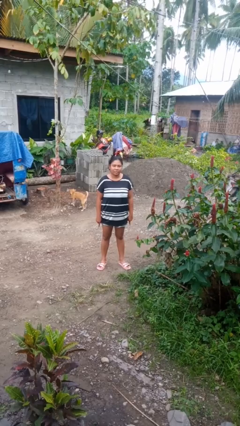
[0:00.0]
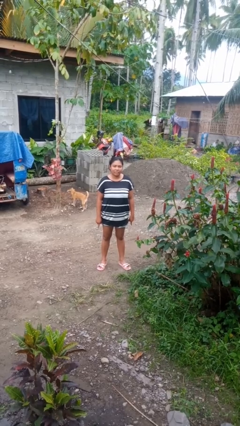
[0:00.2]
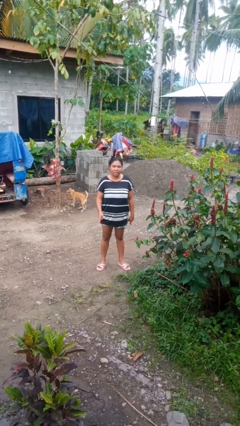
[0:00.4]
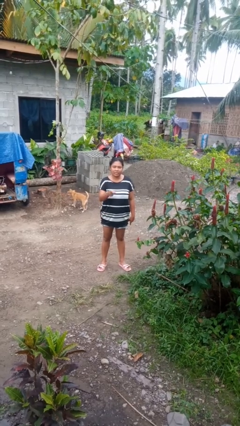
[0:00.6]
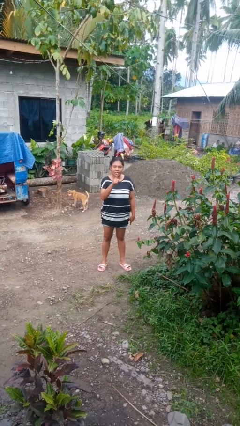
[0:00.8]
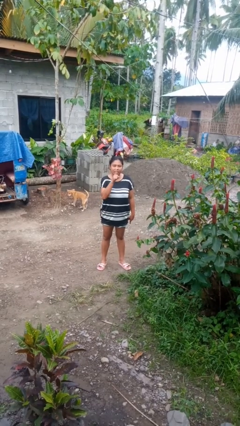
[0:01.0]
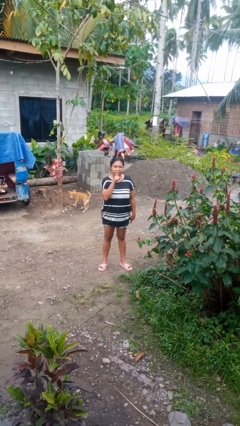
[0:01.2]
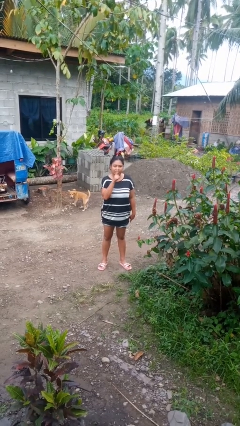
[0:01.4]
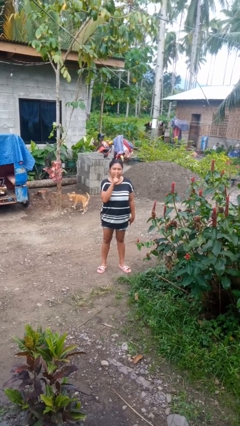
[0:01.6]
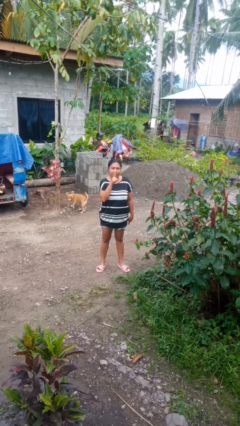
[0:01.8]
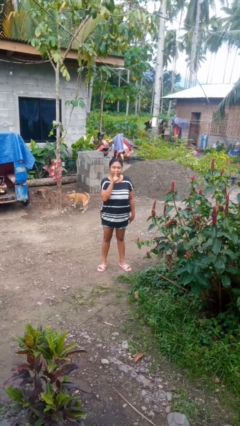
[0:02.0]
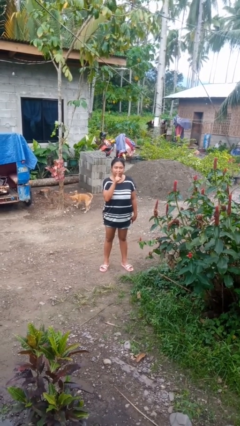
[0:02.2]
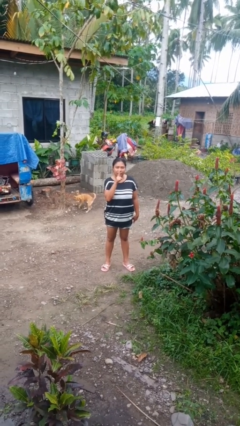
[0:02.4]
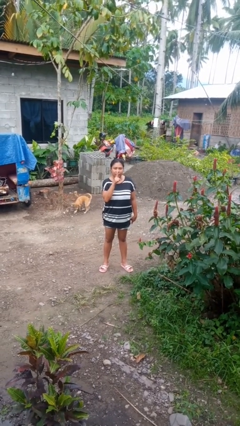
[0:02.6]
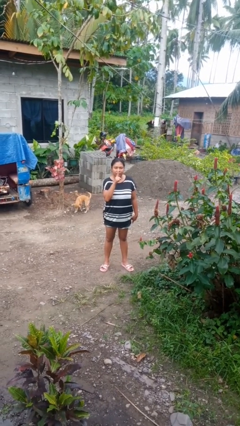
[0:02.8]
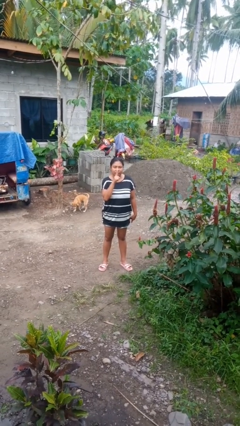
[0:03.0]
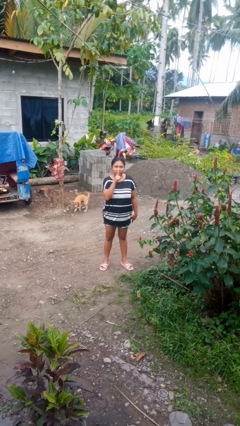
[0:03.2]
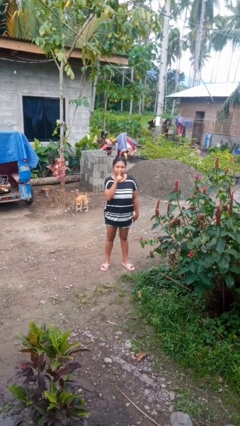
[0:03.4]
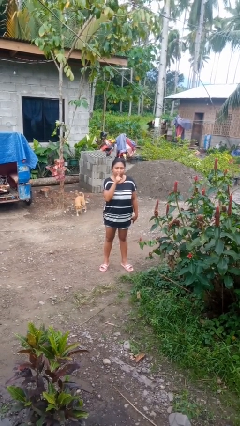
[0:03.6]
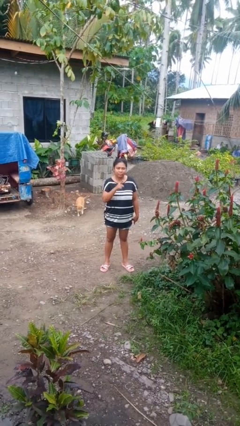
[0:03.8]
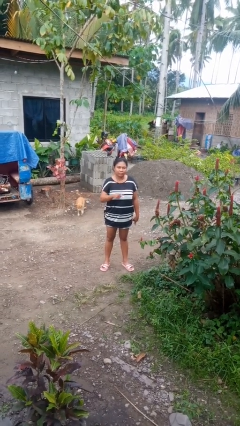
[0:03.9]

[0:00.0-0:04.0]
person gestures be quiet

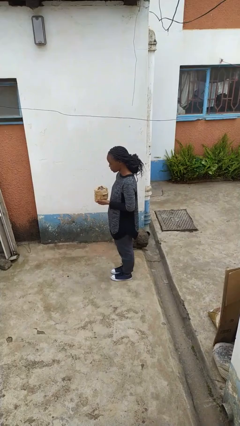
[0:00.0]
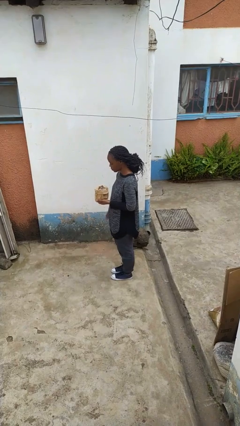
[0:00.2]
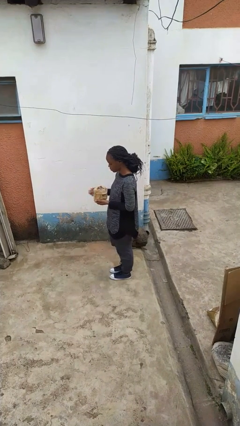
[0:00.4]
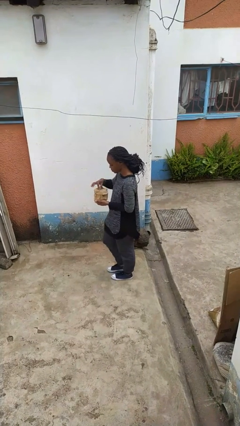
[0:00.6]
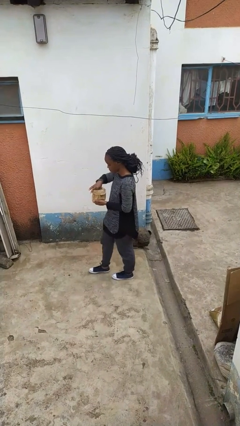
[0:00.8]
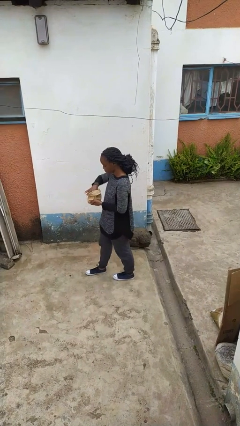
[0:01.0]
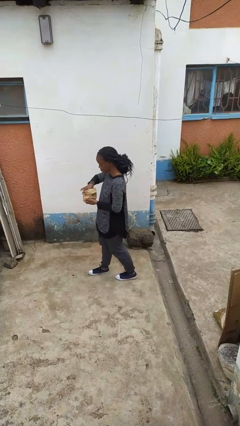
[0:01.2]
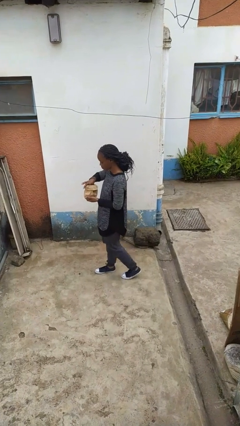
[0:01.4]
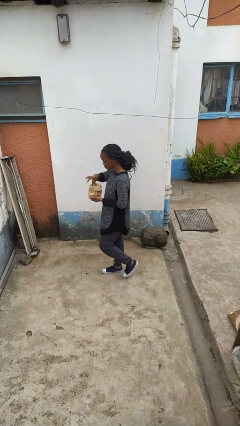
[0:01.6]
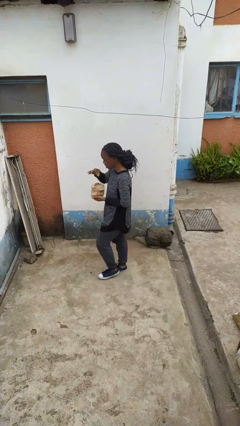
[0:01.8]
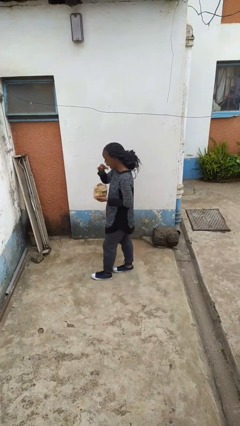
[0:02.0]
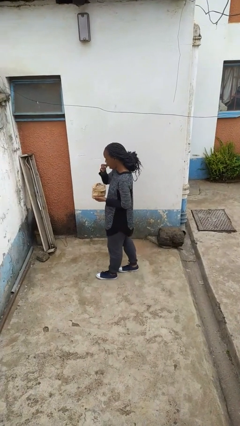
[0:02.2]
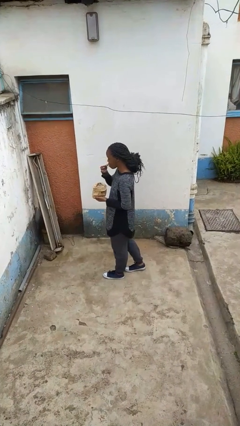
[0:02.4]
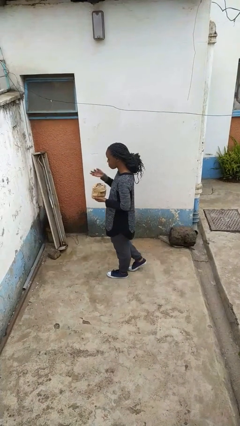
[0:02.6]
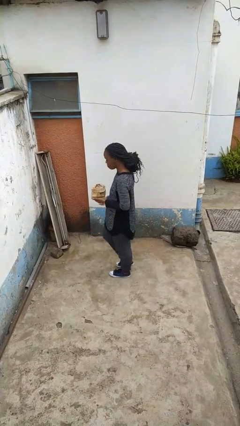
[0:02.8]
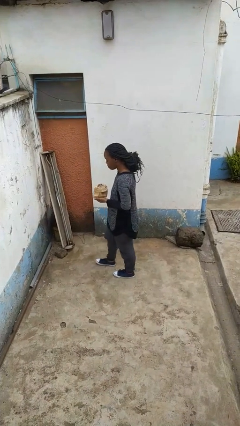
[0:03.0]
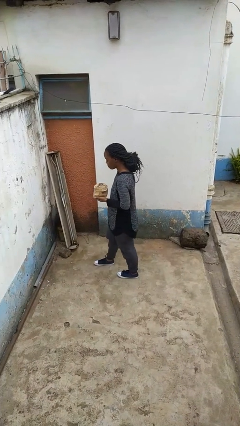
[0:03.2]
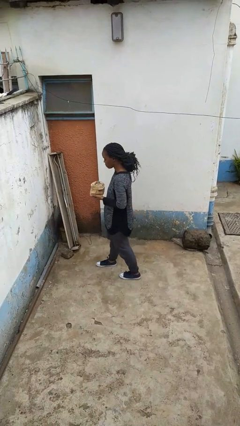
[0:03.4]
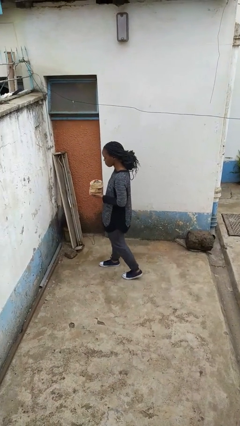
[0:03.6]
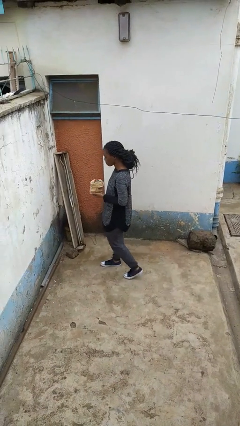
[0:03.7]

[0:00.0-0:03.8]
person eats snack from bag

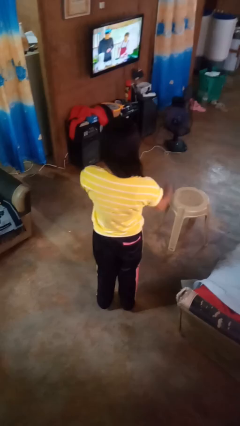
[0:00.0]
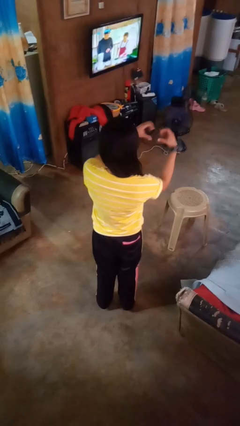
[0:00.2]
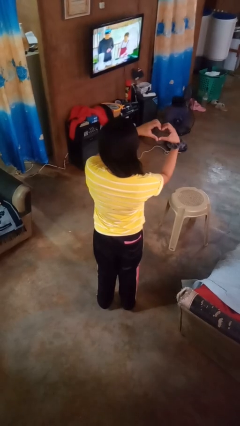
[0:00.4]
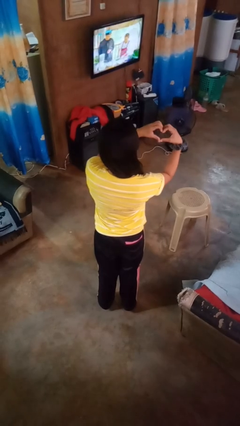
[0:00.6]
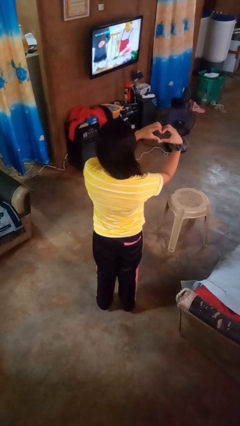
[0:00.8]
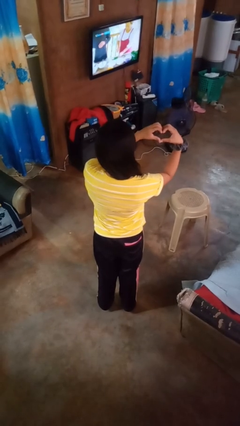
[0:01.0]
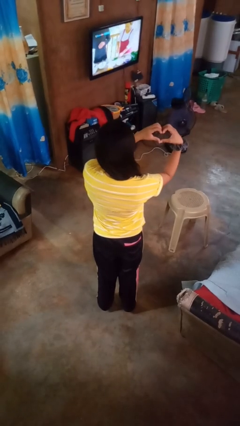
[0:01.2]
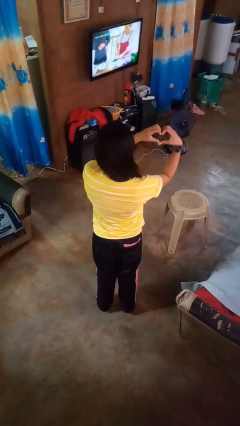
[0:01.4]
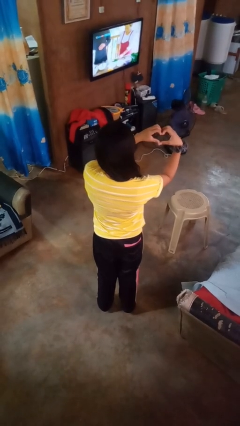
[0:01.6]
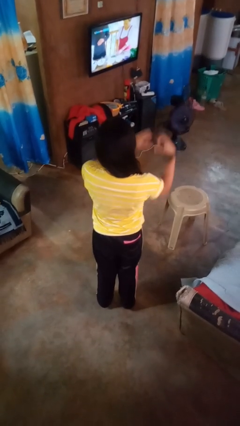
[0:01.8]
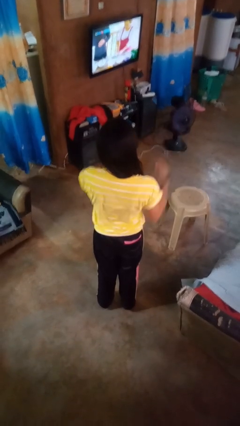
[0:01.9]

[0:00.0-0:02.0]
person gestures heart

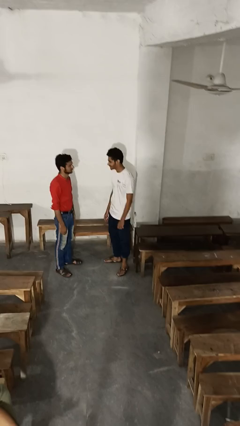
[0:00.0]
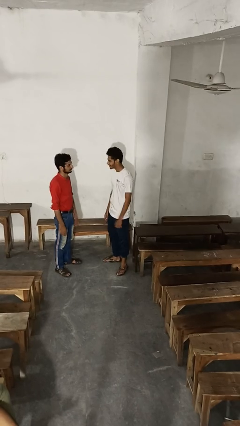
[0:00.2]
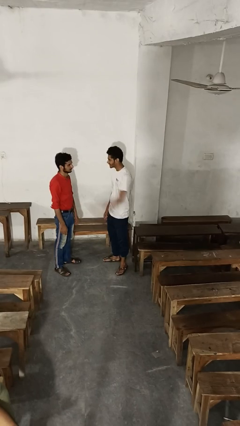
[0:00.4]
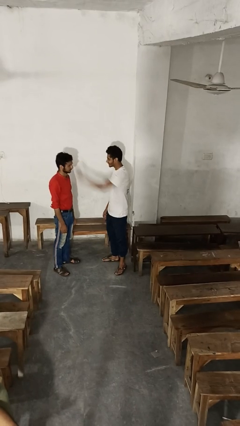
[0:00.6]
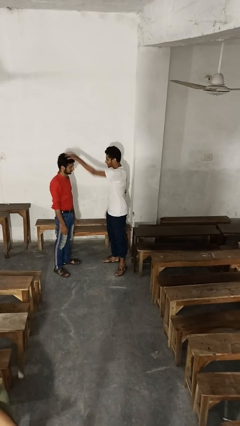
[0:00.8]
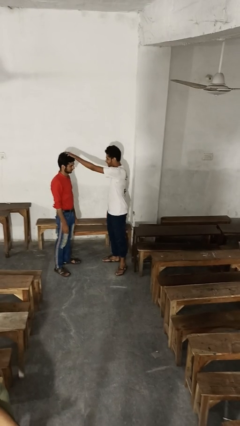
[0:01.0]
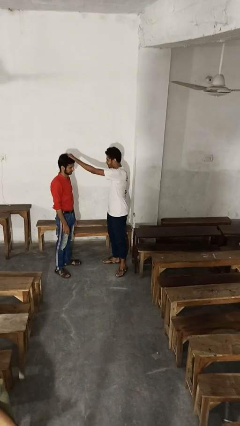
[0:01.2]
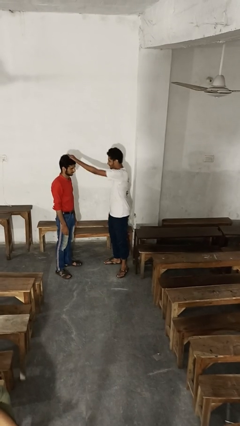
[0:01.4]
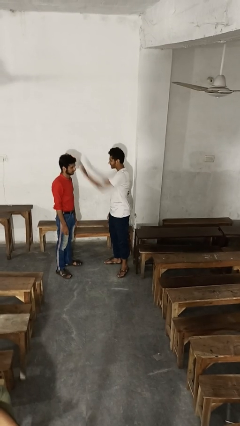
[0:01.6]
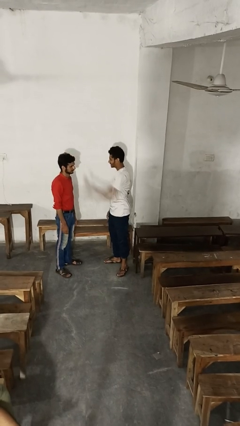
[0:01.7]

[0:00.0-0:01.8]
person grabs person by hair

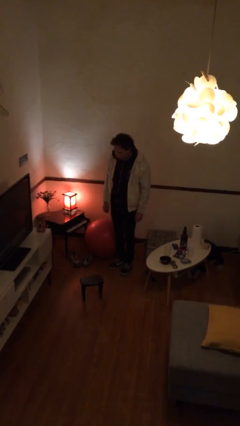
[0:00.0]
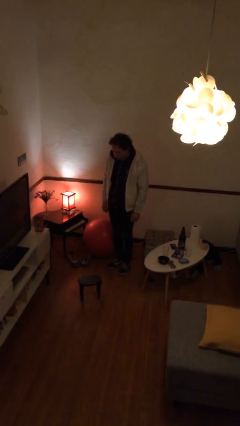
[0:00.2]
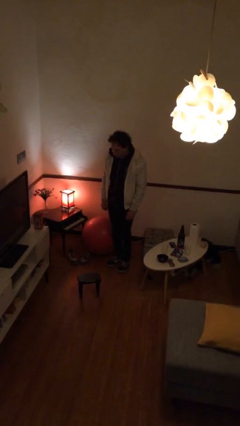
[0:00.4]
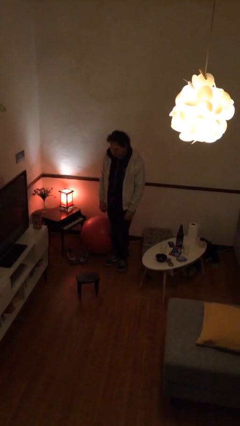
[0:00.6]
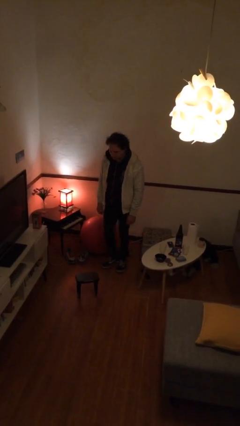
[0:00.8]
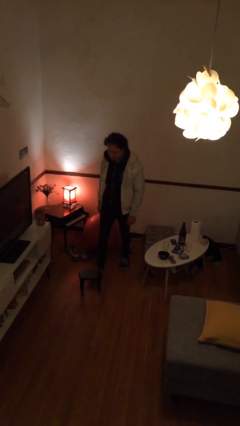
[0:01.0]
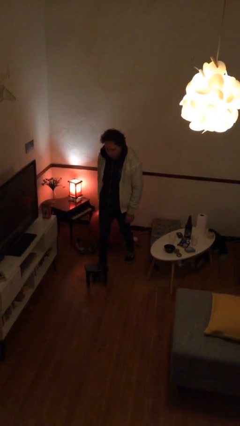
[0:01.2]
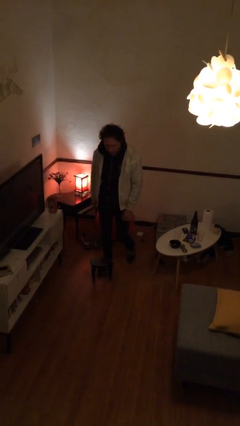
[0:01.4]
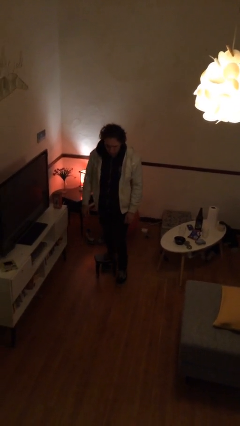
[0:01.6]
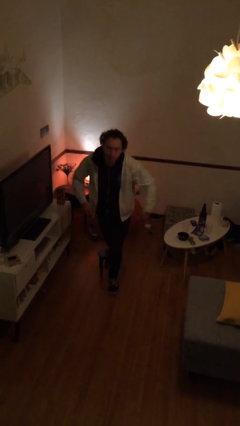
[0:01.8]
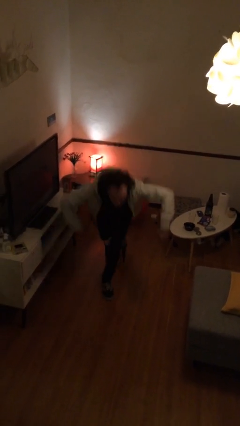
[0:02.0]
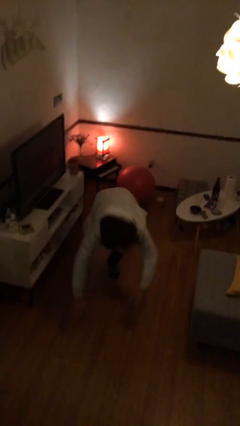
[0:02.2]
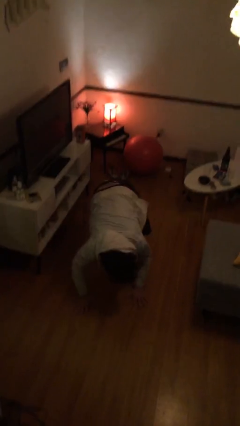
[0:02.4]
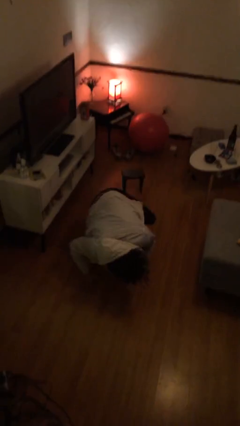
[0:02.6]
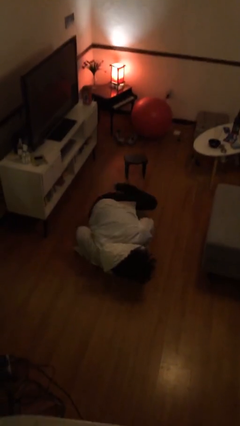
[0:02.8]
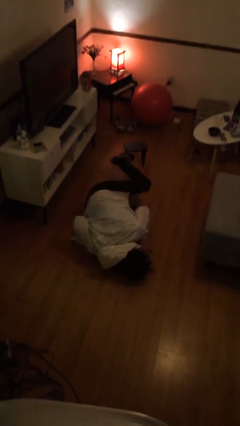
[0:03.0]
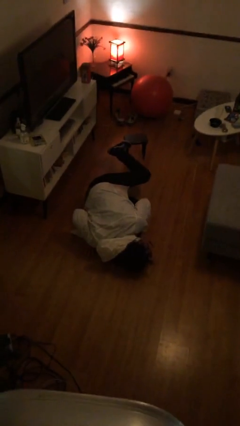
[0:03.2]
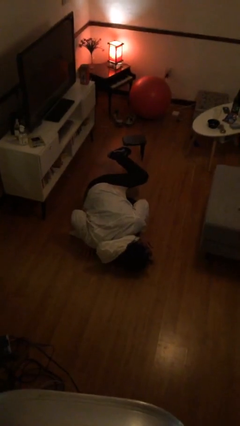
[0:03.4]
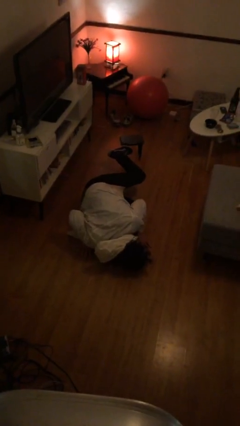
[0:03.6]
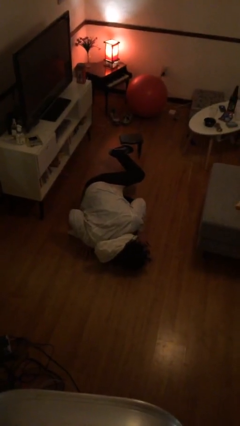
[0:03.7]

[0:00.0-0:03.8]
person trips on object on floor

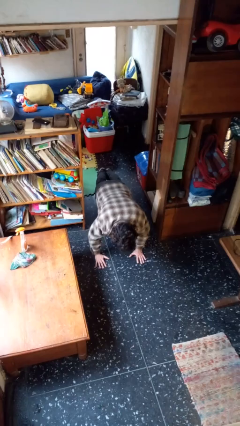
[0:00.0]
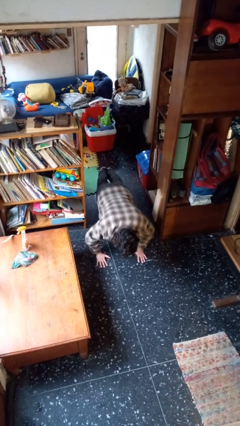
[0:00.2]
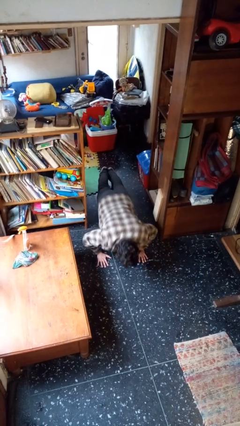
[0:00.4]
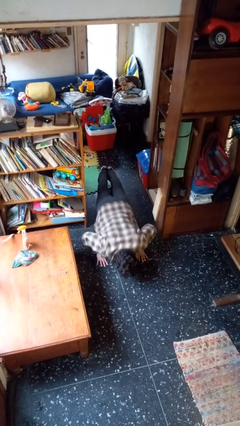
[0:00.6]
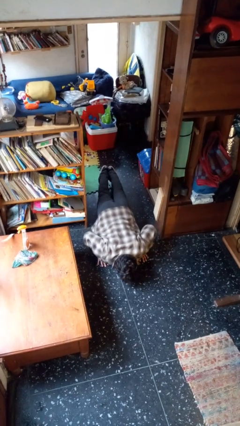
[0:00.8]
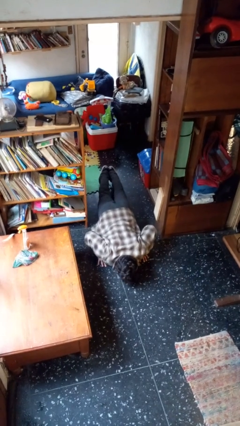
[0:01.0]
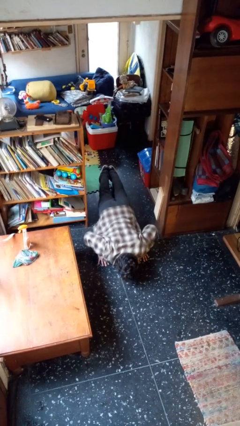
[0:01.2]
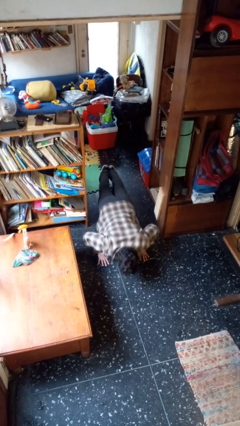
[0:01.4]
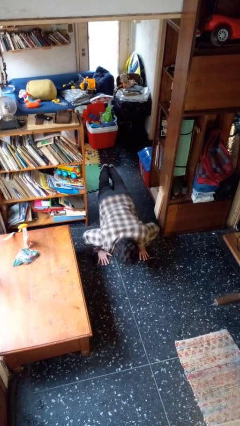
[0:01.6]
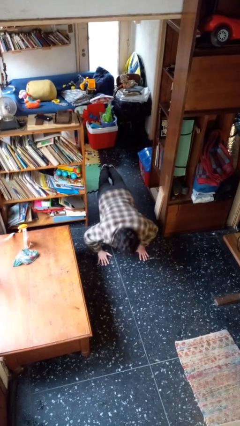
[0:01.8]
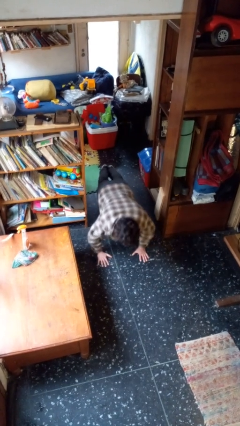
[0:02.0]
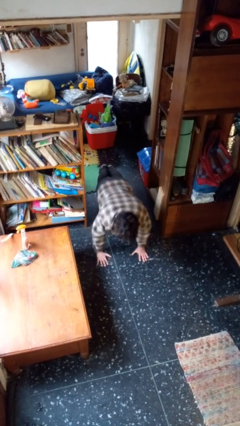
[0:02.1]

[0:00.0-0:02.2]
person exercises with pushup
